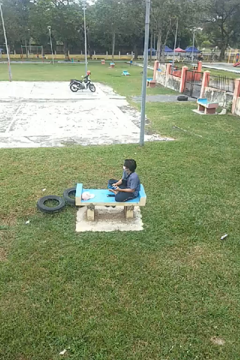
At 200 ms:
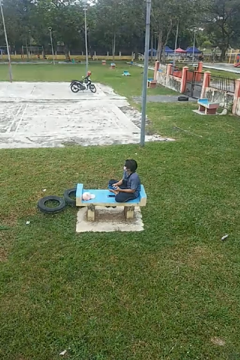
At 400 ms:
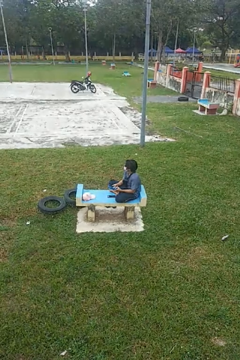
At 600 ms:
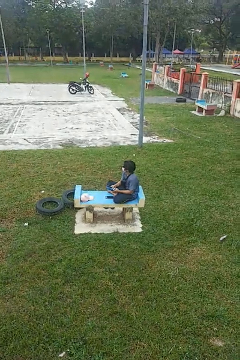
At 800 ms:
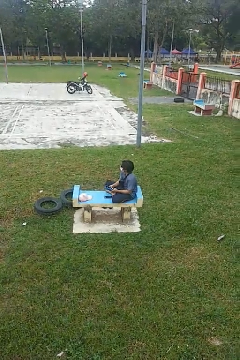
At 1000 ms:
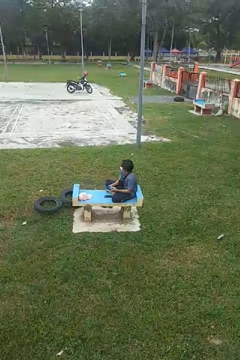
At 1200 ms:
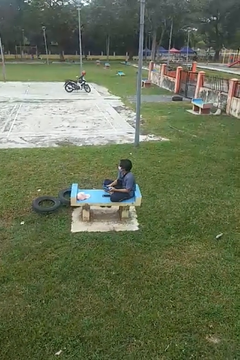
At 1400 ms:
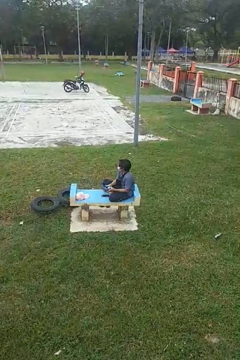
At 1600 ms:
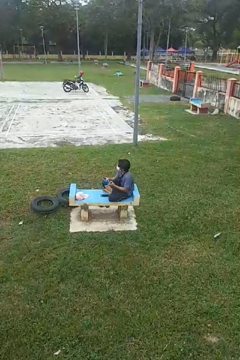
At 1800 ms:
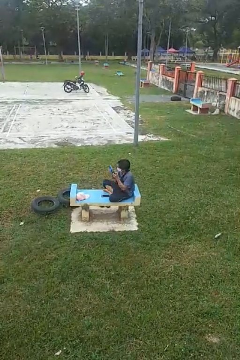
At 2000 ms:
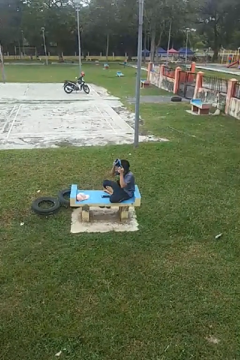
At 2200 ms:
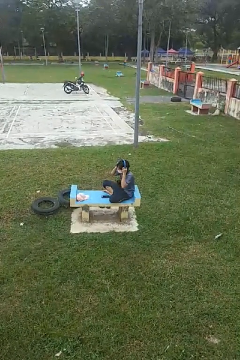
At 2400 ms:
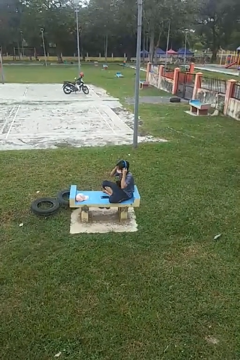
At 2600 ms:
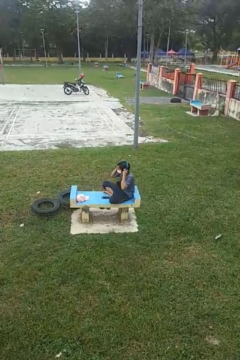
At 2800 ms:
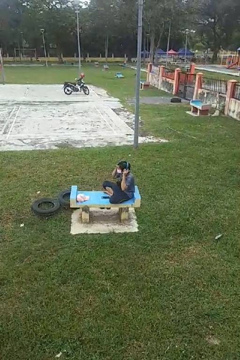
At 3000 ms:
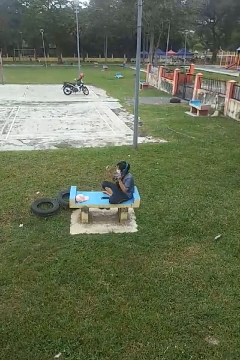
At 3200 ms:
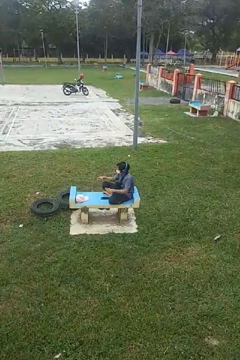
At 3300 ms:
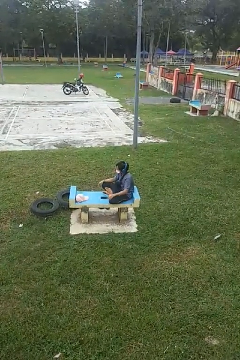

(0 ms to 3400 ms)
person puts on headphones

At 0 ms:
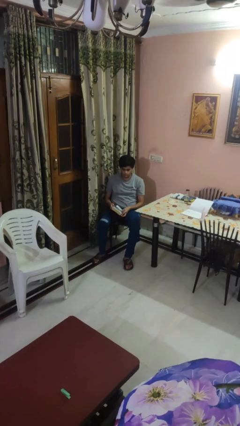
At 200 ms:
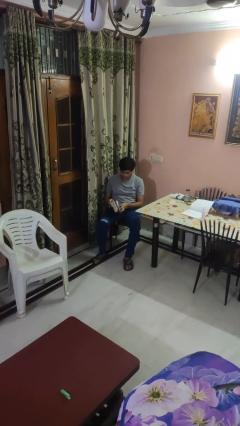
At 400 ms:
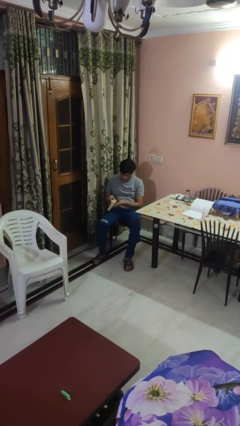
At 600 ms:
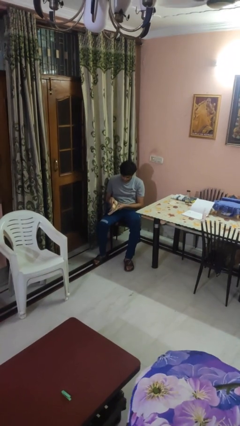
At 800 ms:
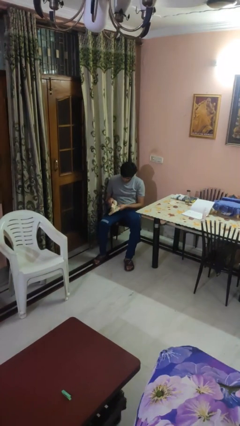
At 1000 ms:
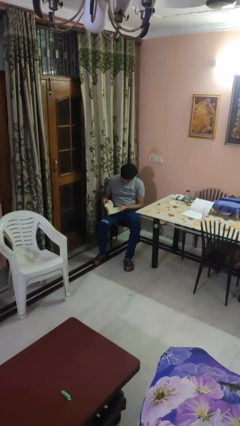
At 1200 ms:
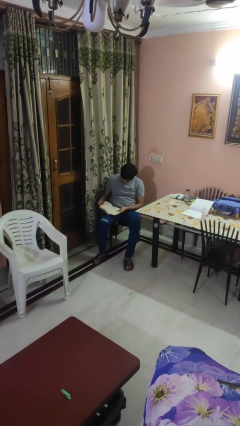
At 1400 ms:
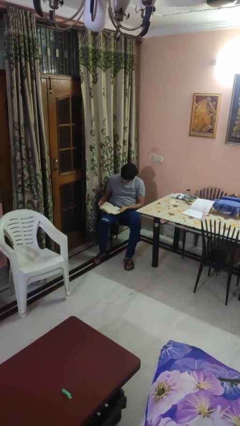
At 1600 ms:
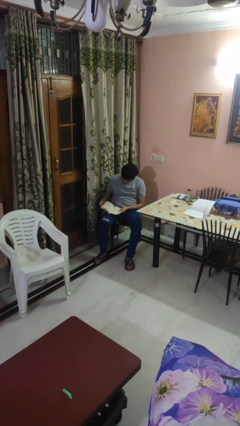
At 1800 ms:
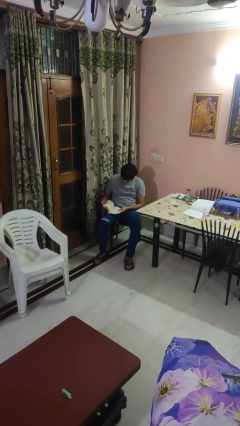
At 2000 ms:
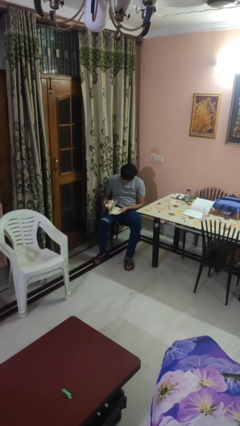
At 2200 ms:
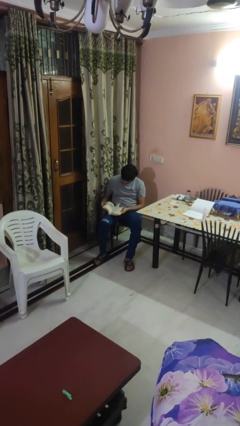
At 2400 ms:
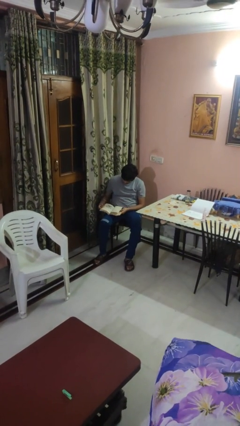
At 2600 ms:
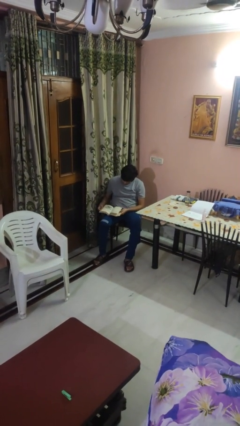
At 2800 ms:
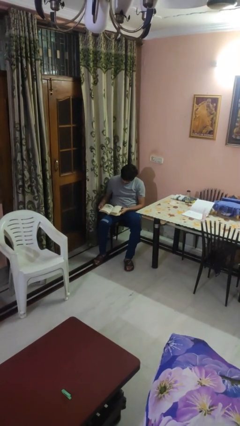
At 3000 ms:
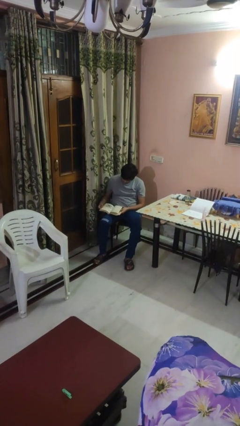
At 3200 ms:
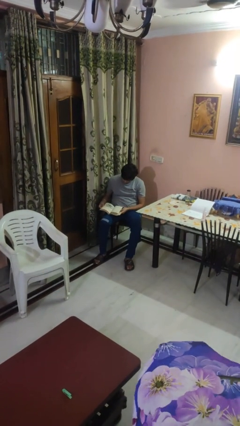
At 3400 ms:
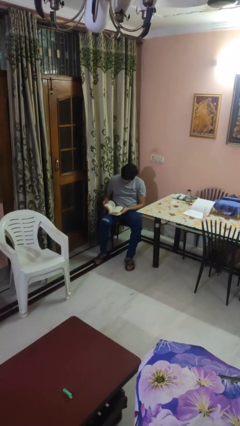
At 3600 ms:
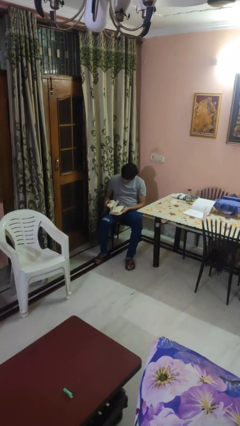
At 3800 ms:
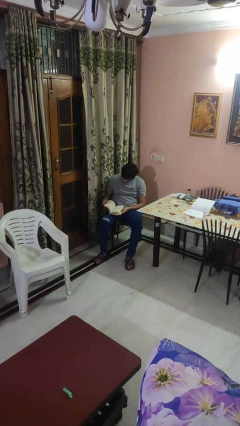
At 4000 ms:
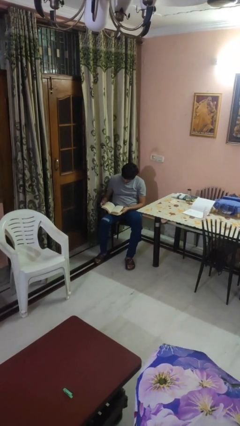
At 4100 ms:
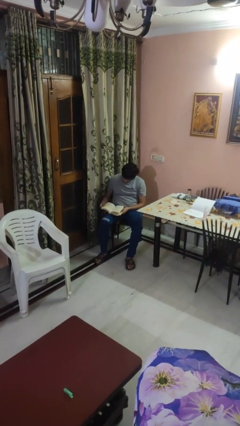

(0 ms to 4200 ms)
person reads book

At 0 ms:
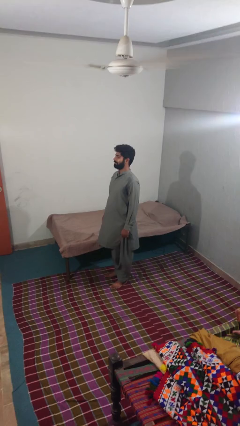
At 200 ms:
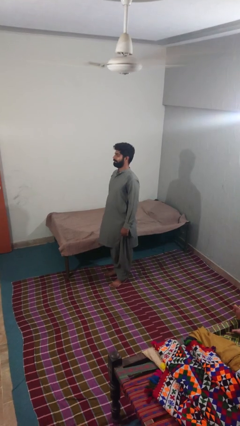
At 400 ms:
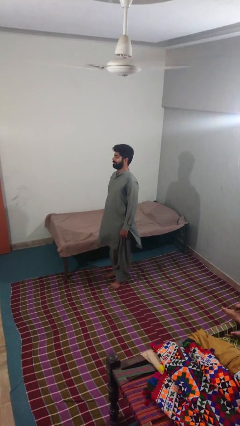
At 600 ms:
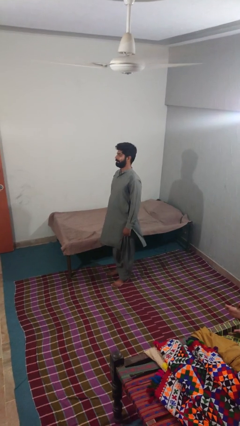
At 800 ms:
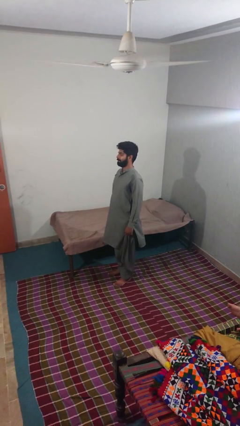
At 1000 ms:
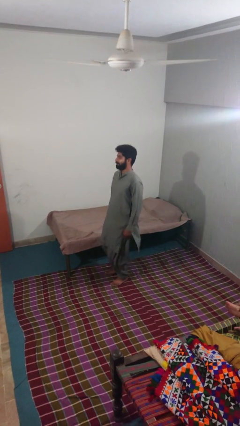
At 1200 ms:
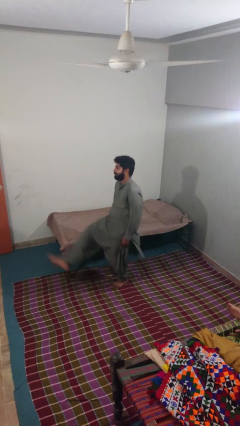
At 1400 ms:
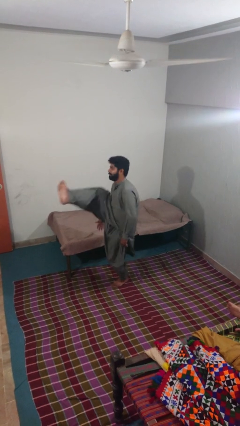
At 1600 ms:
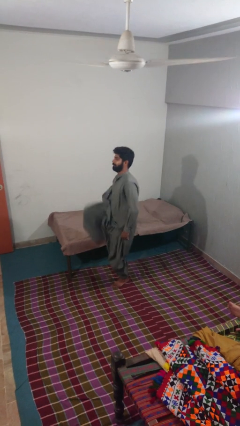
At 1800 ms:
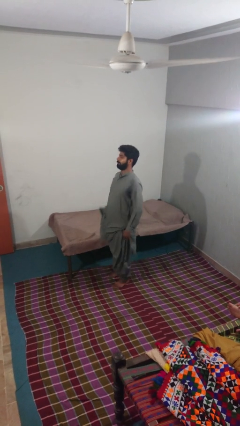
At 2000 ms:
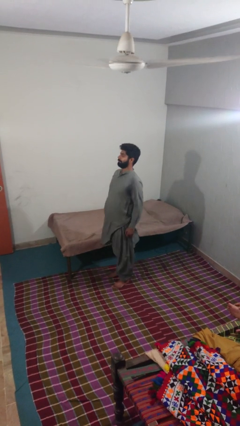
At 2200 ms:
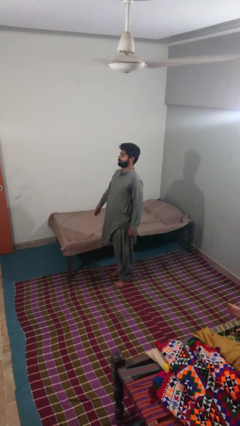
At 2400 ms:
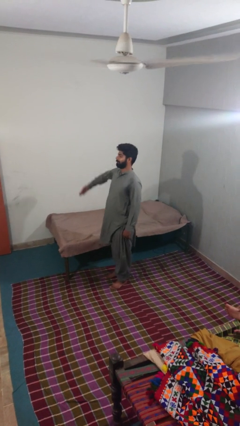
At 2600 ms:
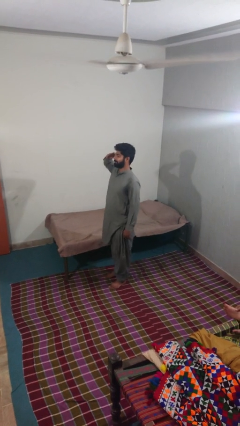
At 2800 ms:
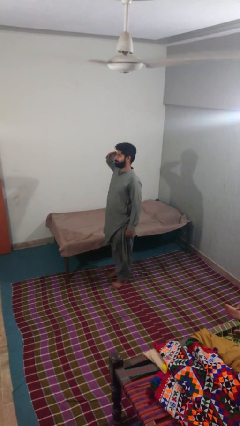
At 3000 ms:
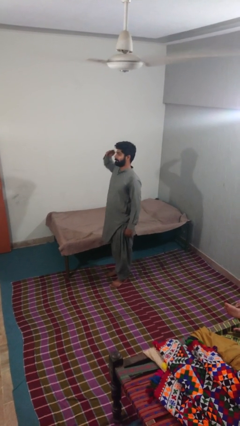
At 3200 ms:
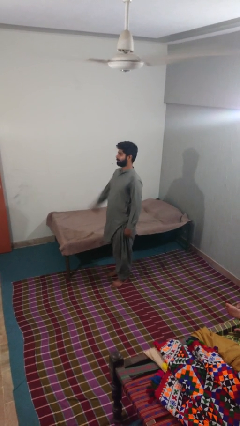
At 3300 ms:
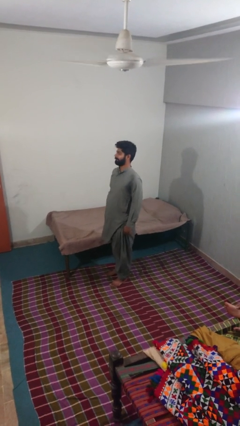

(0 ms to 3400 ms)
person salutes

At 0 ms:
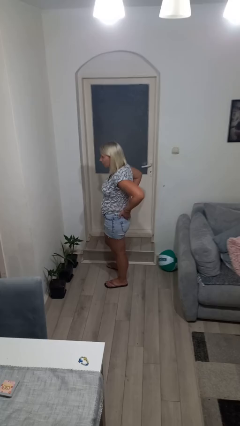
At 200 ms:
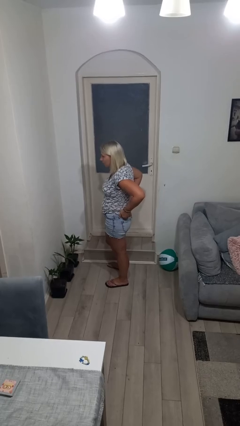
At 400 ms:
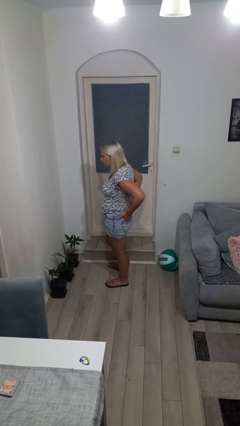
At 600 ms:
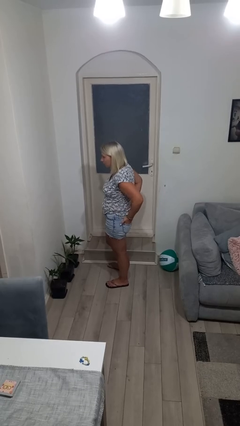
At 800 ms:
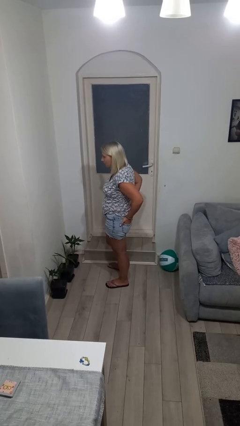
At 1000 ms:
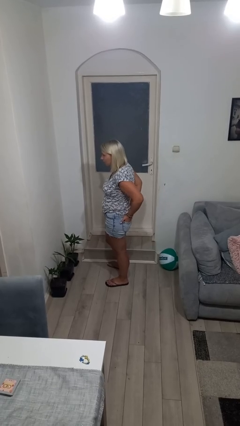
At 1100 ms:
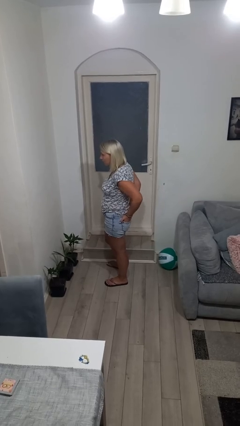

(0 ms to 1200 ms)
person puts hands in back pockets

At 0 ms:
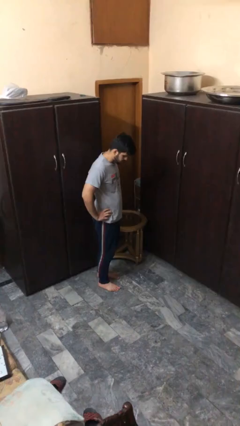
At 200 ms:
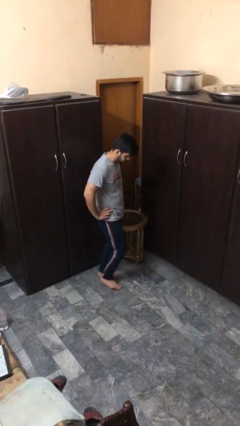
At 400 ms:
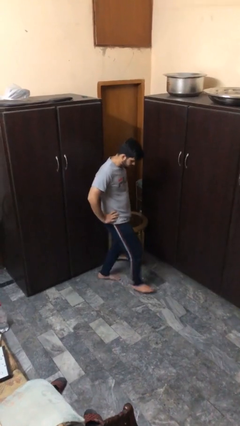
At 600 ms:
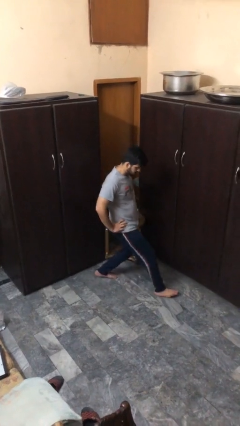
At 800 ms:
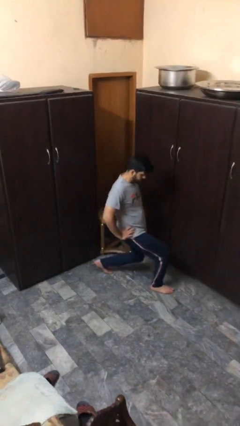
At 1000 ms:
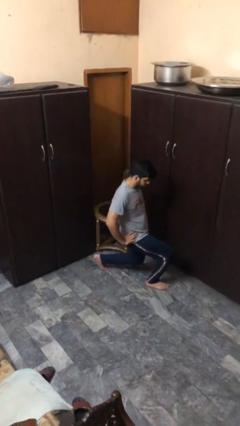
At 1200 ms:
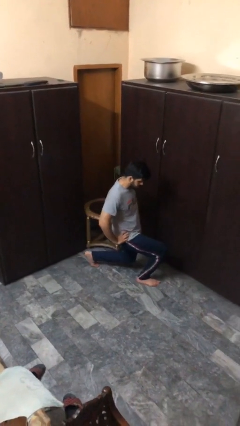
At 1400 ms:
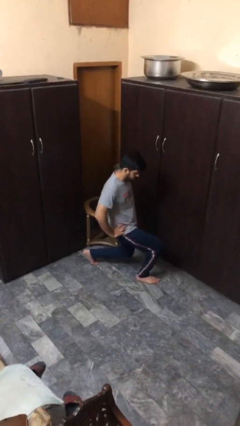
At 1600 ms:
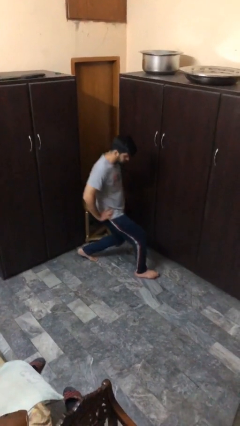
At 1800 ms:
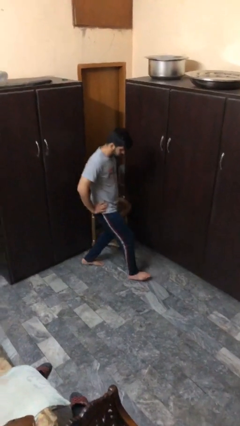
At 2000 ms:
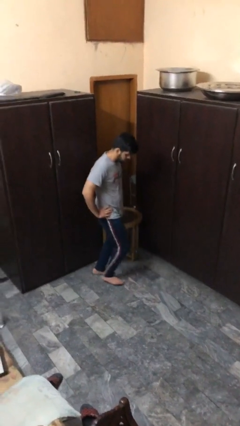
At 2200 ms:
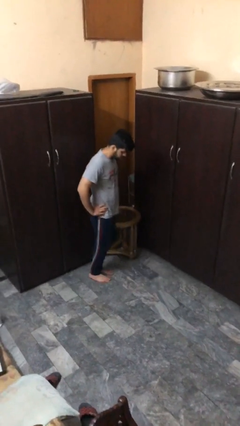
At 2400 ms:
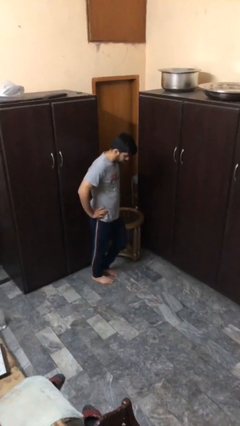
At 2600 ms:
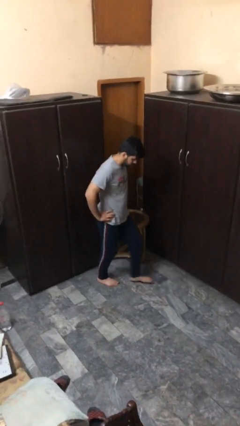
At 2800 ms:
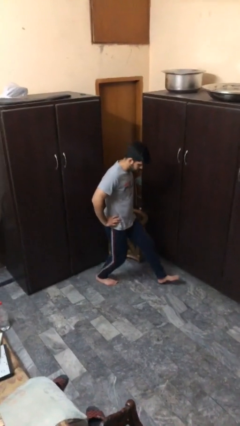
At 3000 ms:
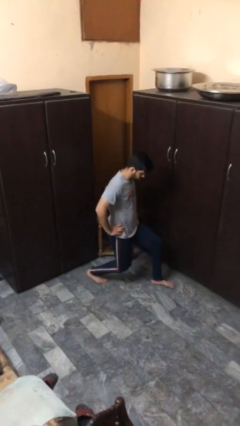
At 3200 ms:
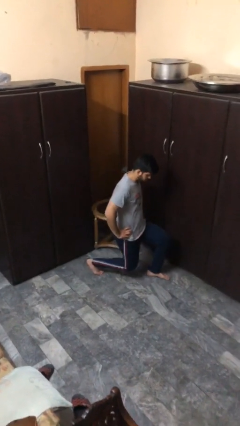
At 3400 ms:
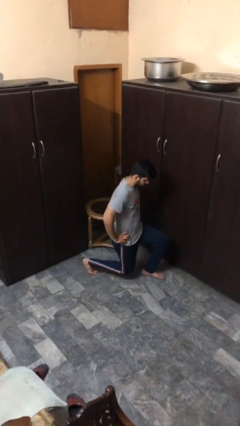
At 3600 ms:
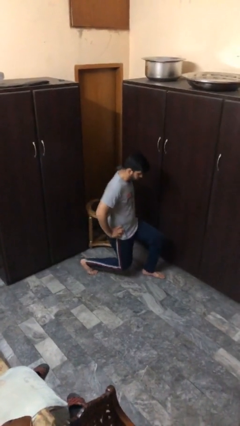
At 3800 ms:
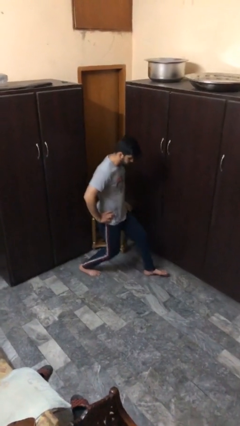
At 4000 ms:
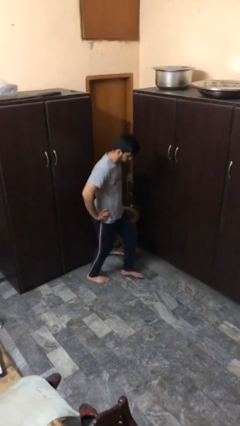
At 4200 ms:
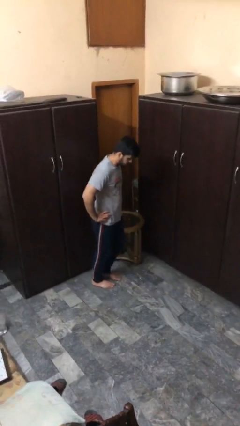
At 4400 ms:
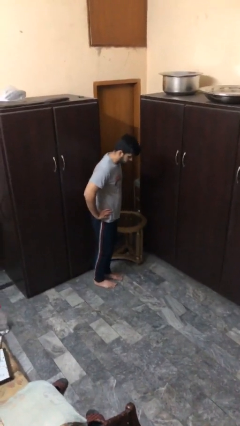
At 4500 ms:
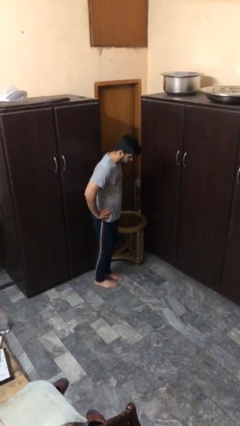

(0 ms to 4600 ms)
person exercises with lunges

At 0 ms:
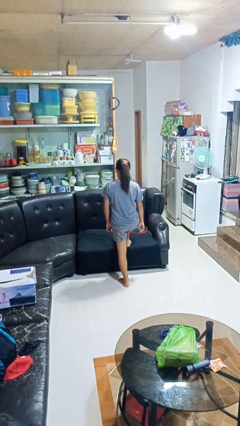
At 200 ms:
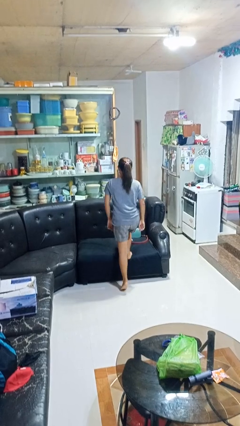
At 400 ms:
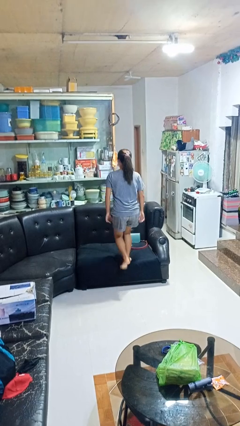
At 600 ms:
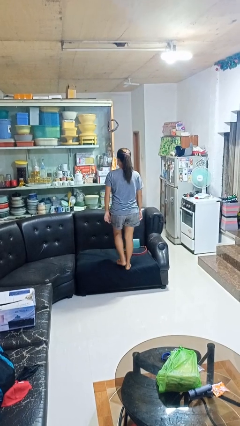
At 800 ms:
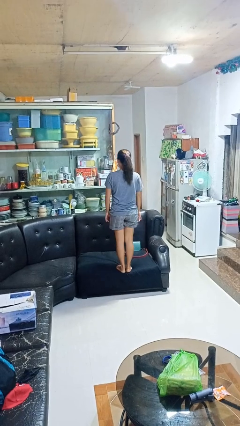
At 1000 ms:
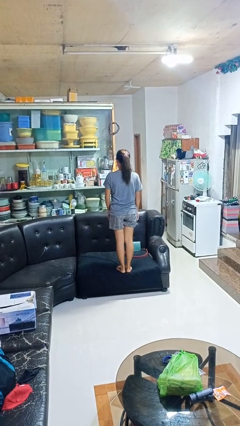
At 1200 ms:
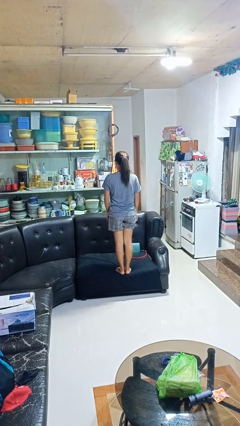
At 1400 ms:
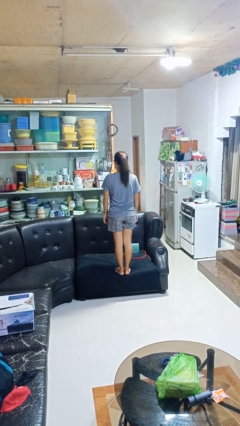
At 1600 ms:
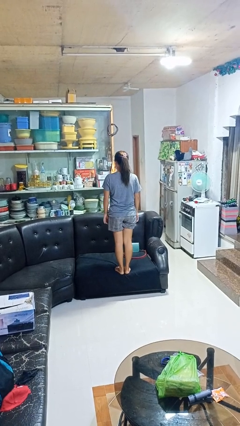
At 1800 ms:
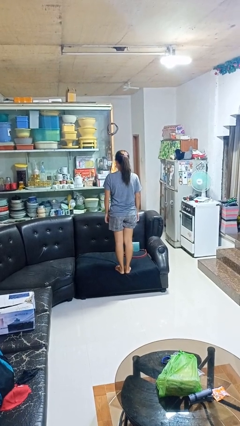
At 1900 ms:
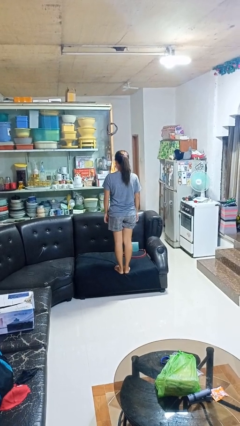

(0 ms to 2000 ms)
person climbs on couch
